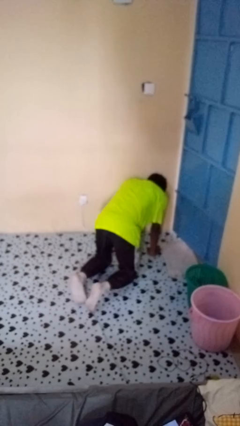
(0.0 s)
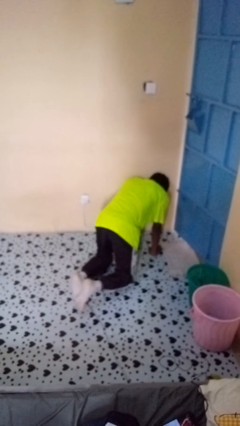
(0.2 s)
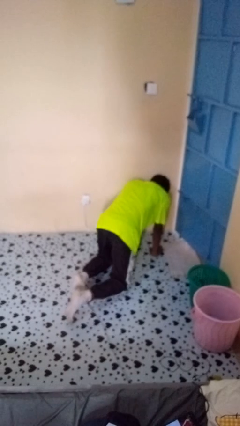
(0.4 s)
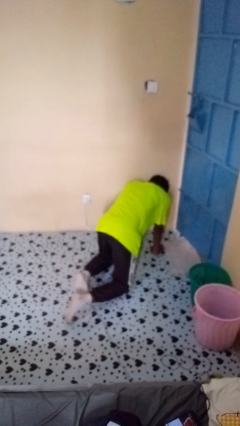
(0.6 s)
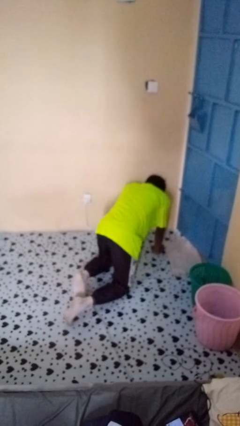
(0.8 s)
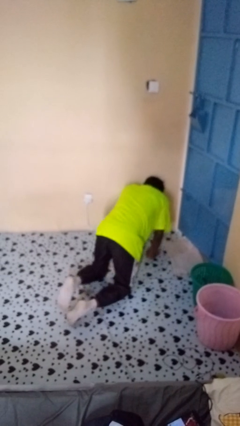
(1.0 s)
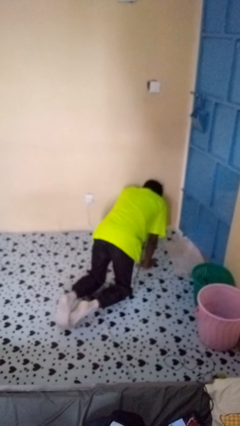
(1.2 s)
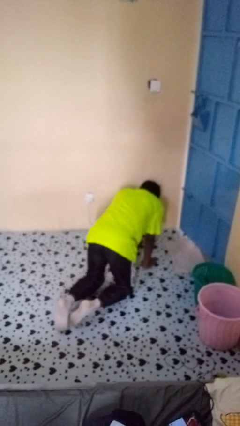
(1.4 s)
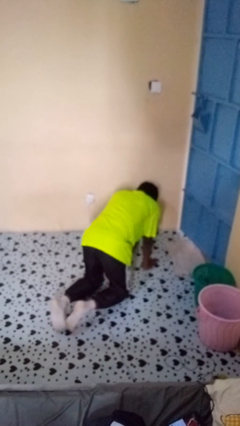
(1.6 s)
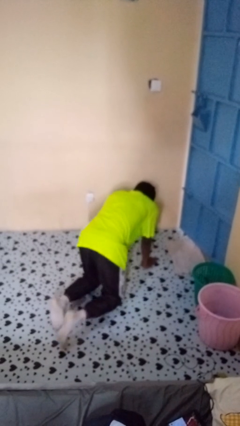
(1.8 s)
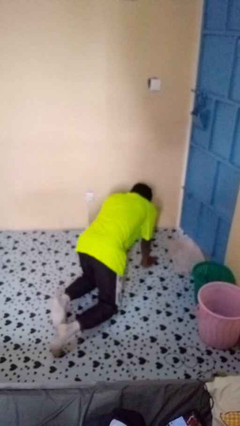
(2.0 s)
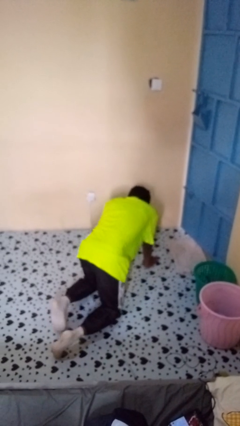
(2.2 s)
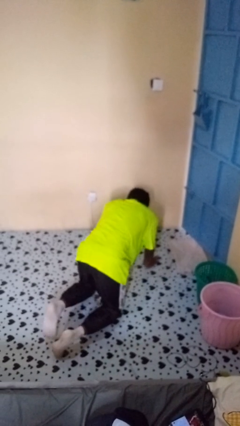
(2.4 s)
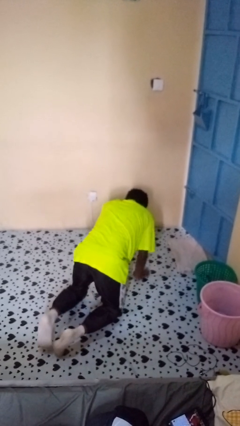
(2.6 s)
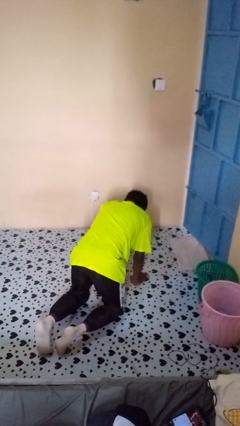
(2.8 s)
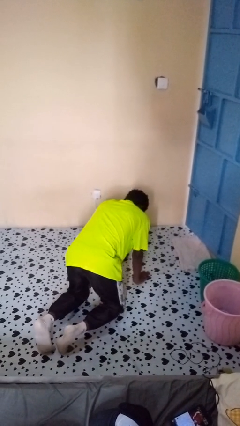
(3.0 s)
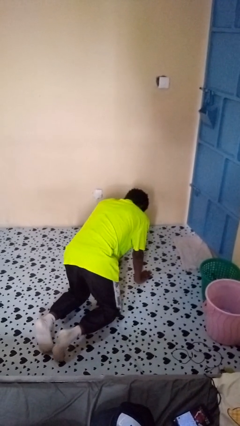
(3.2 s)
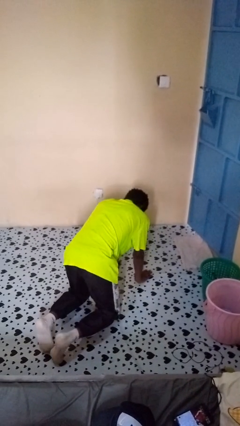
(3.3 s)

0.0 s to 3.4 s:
person crawls

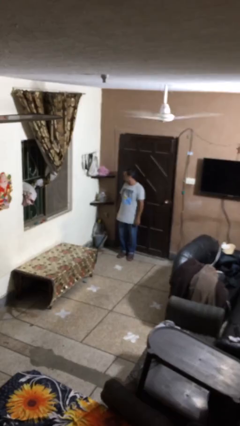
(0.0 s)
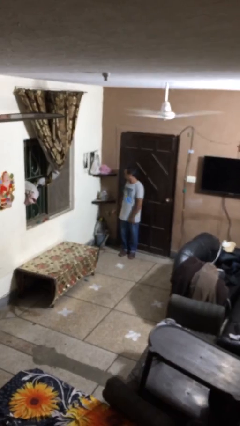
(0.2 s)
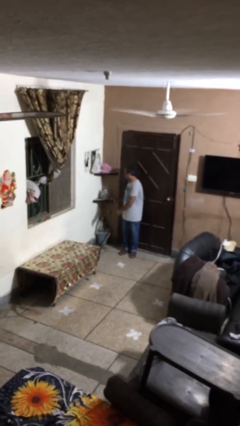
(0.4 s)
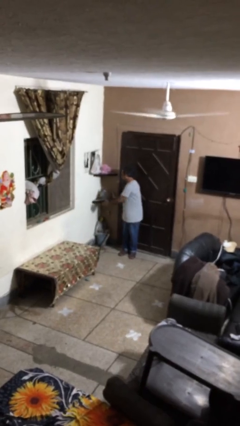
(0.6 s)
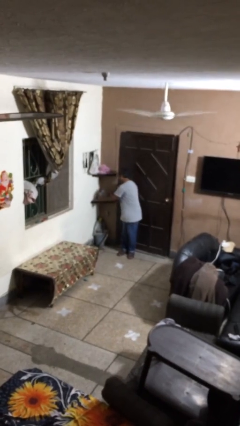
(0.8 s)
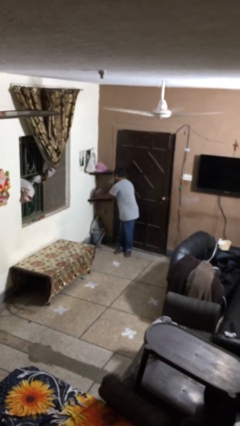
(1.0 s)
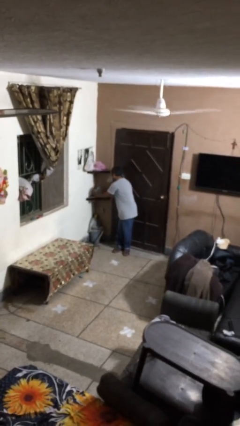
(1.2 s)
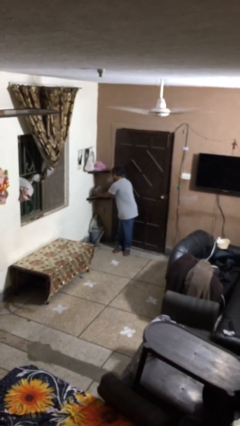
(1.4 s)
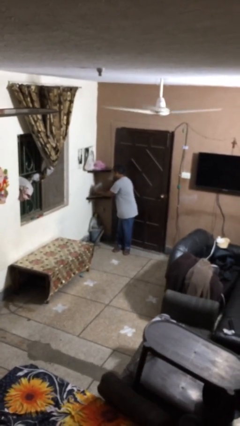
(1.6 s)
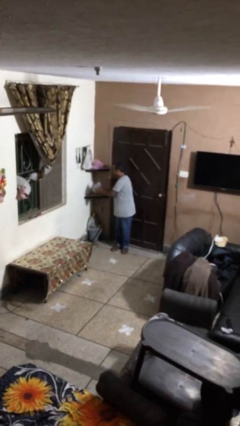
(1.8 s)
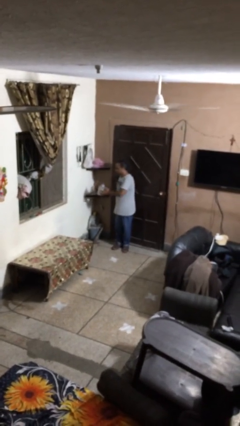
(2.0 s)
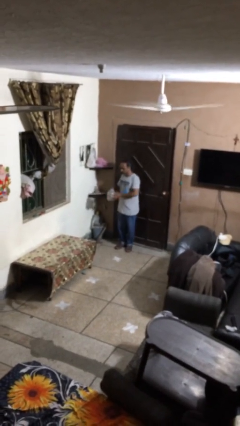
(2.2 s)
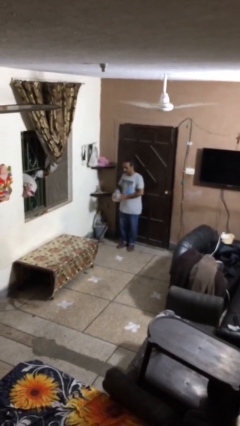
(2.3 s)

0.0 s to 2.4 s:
person picks up object from shelf

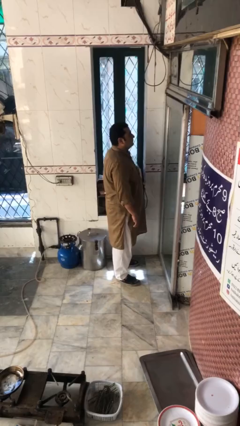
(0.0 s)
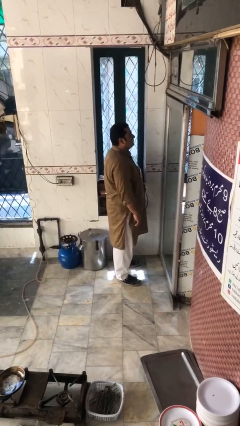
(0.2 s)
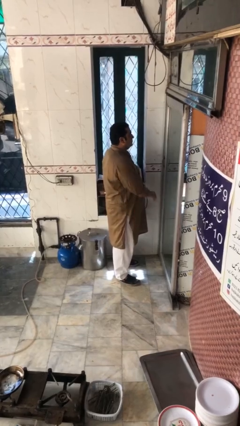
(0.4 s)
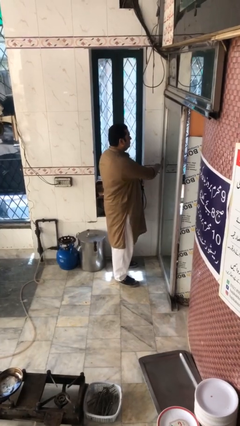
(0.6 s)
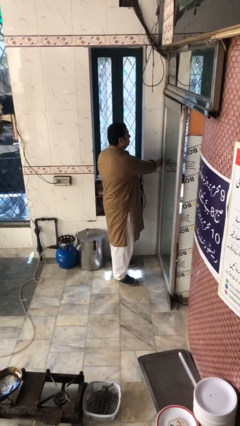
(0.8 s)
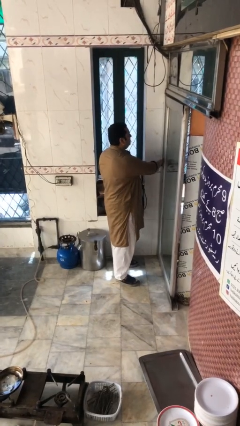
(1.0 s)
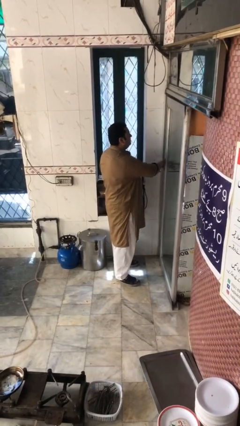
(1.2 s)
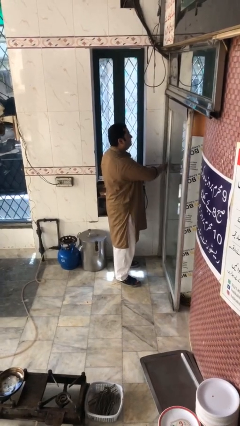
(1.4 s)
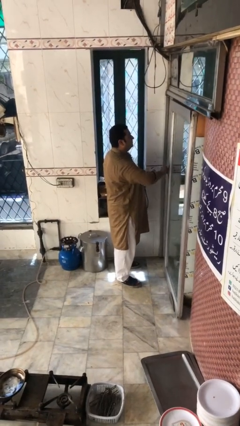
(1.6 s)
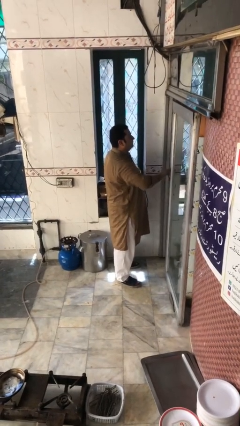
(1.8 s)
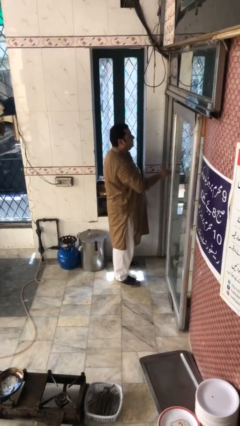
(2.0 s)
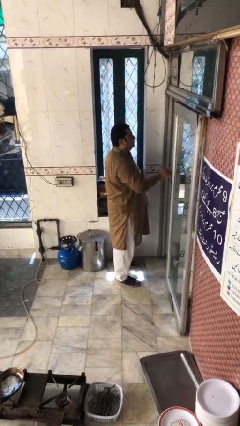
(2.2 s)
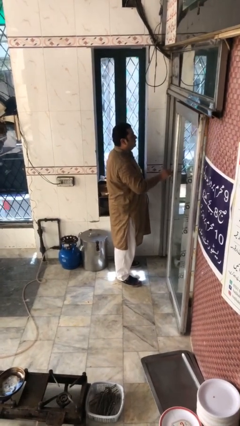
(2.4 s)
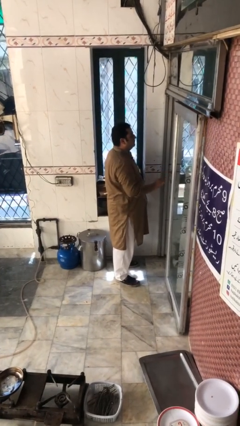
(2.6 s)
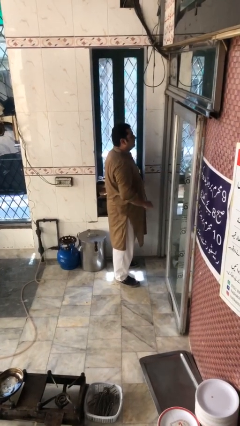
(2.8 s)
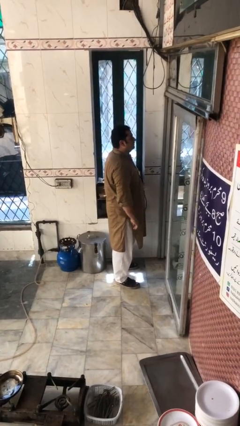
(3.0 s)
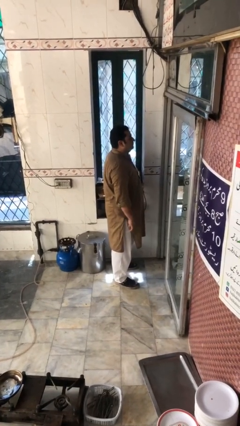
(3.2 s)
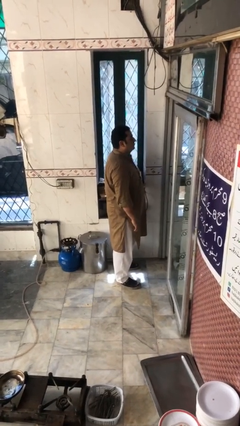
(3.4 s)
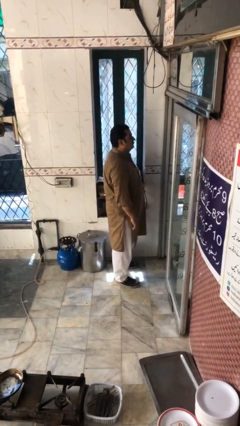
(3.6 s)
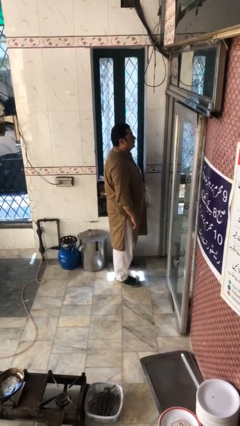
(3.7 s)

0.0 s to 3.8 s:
person opens sliding door

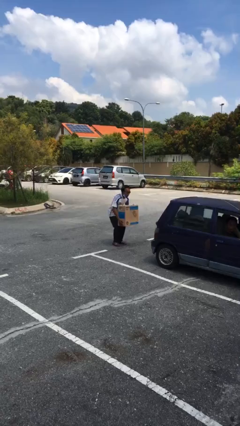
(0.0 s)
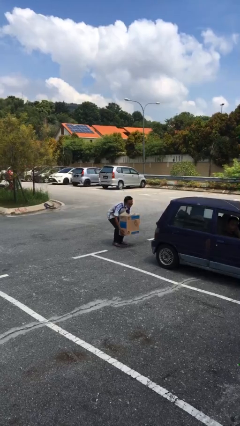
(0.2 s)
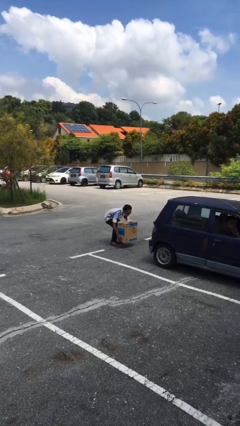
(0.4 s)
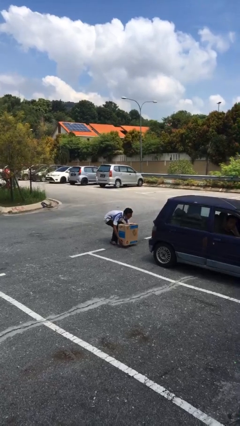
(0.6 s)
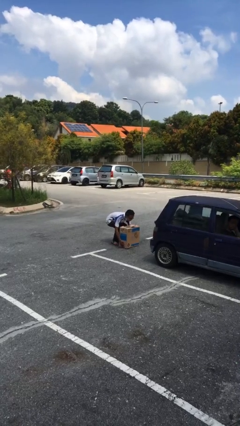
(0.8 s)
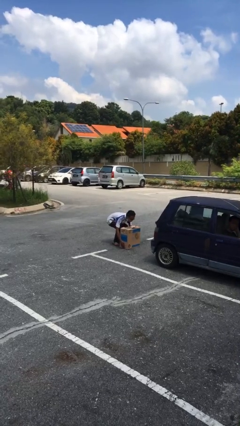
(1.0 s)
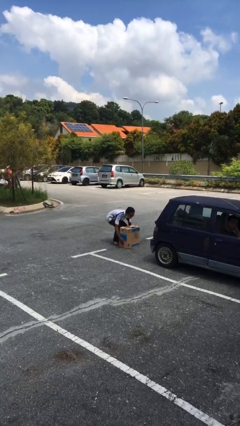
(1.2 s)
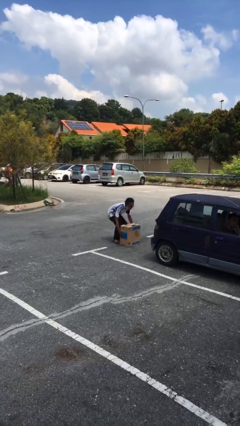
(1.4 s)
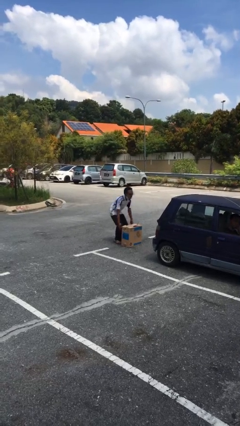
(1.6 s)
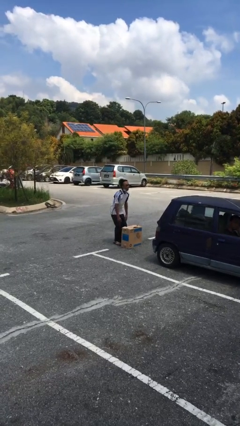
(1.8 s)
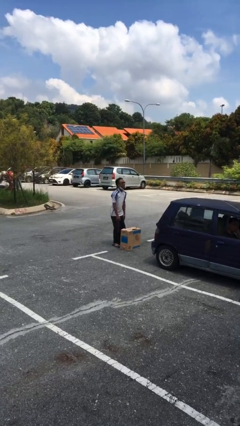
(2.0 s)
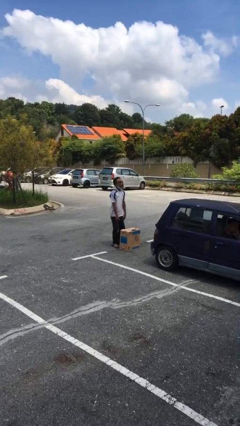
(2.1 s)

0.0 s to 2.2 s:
person puts down object on floor

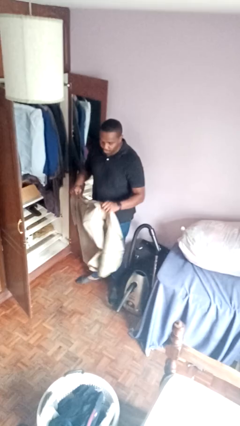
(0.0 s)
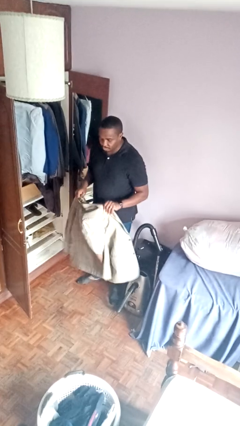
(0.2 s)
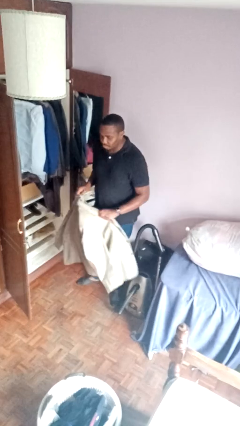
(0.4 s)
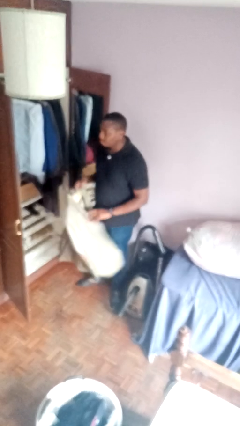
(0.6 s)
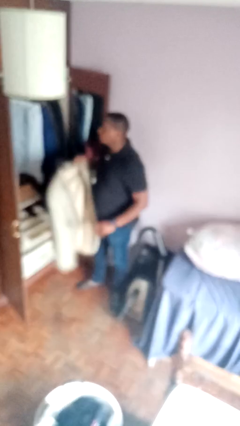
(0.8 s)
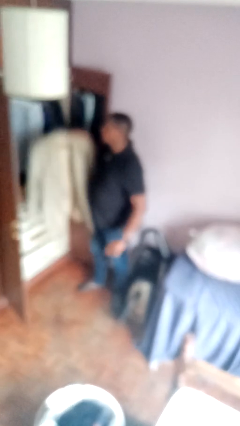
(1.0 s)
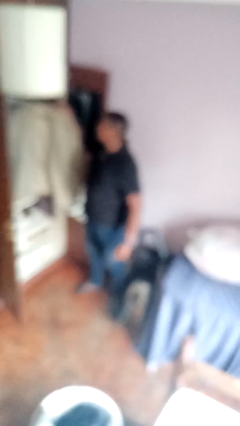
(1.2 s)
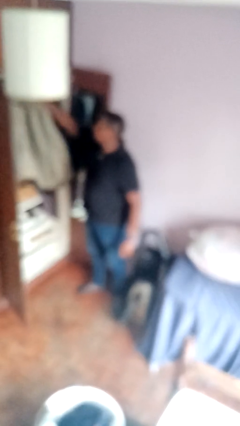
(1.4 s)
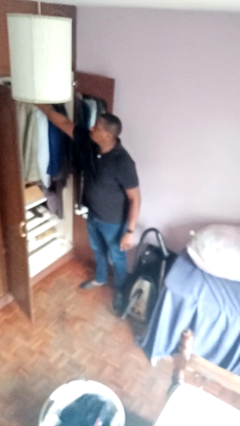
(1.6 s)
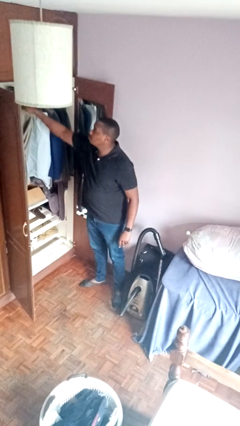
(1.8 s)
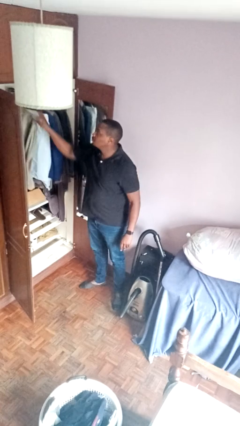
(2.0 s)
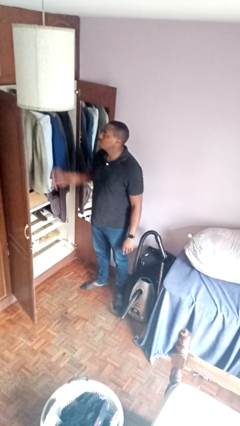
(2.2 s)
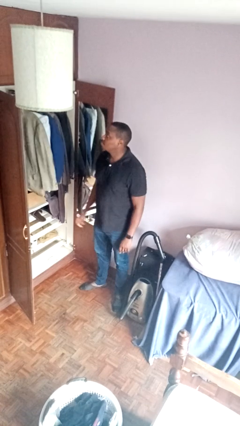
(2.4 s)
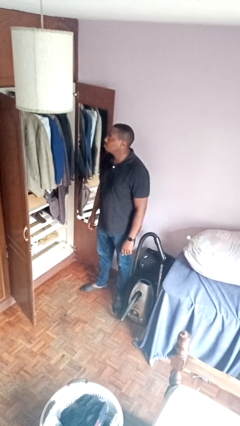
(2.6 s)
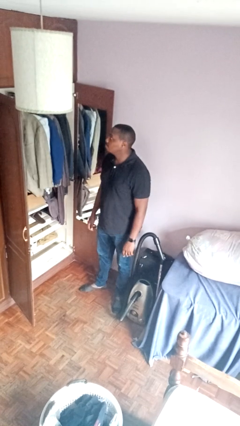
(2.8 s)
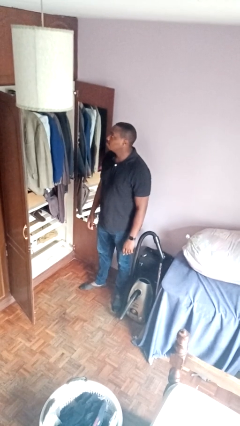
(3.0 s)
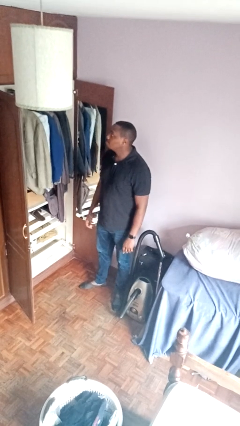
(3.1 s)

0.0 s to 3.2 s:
person puts clothes into closet

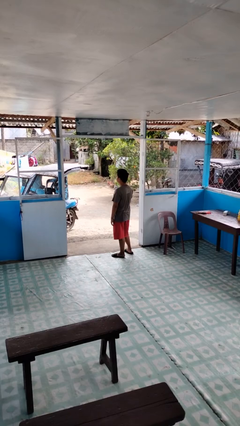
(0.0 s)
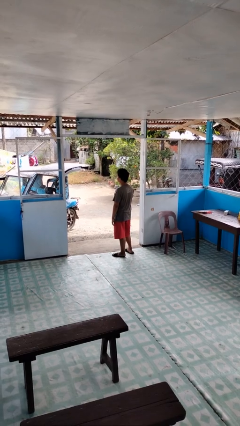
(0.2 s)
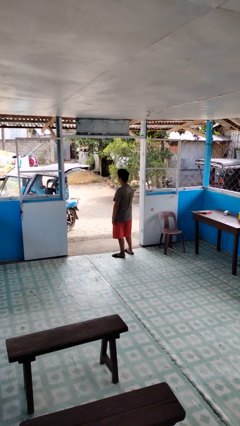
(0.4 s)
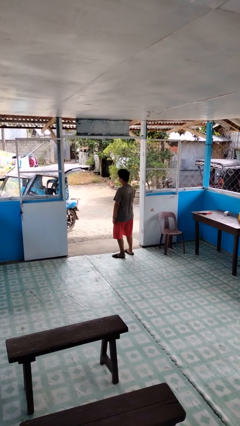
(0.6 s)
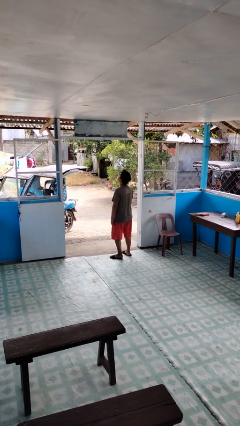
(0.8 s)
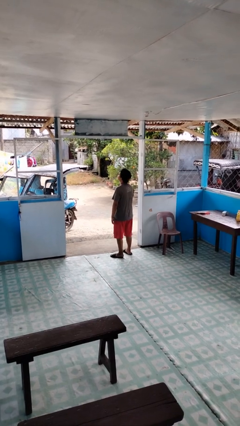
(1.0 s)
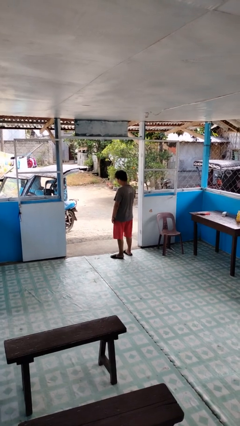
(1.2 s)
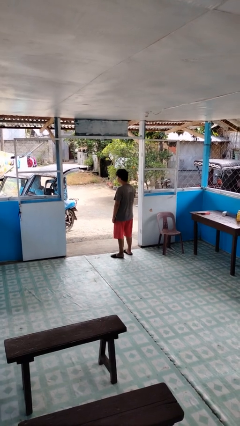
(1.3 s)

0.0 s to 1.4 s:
person nods head

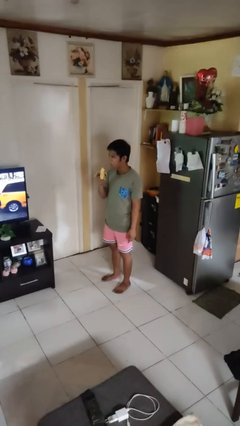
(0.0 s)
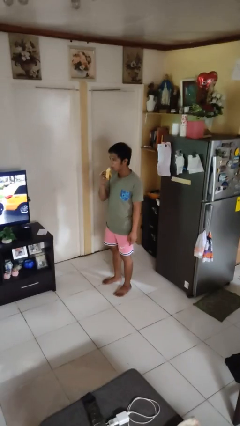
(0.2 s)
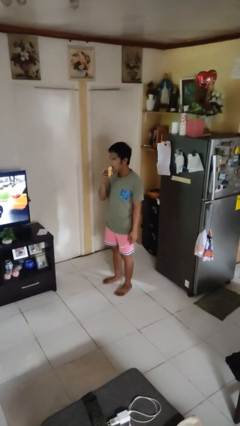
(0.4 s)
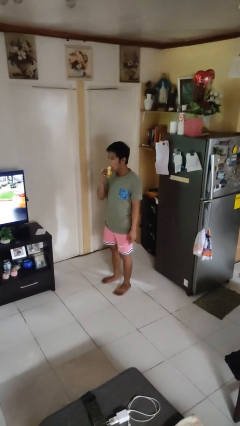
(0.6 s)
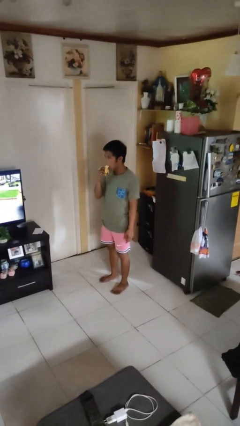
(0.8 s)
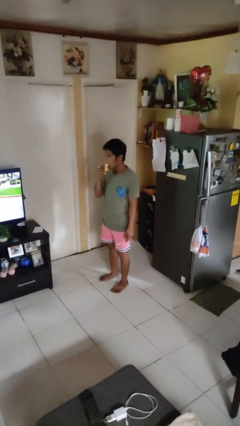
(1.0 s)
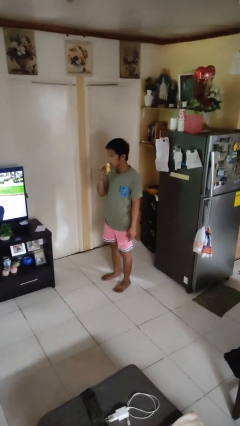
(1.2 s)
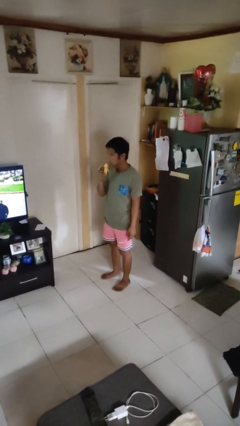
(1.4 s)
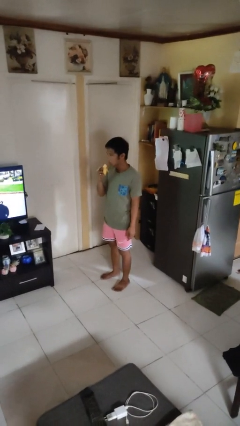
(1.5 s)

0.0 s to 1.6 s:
person eats banana
